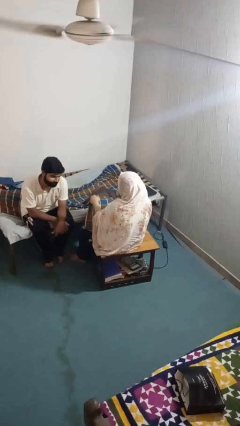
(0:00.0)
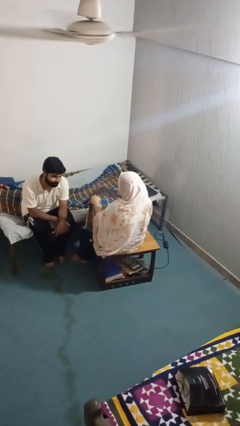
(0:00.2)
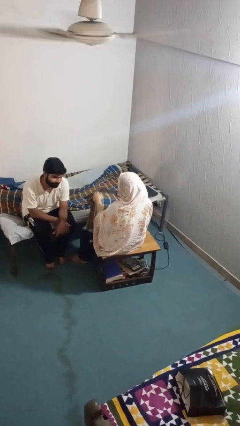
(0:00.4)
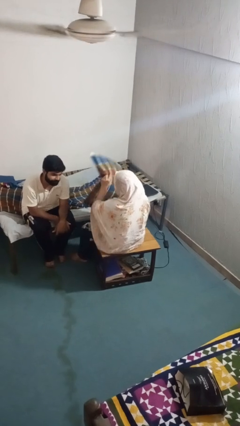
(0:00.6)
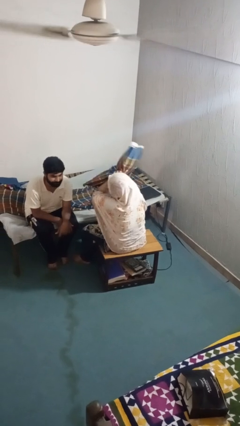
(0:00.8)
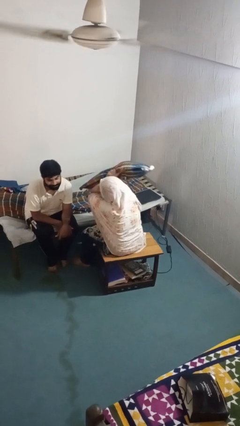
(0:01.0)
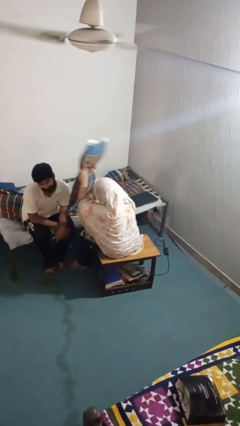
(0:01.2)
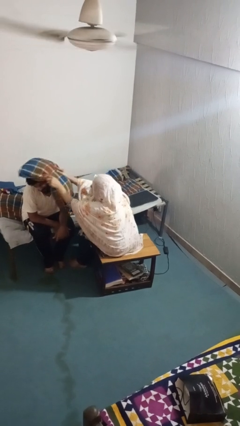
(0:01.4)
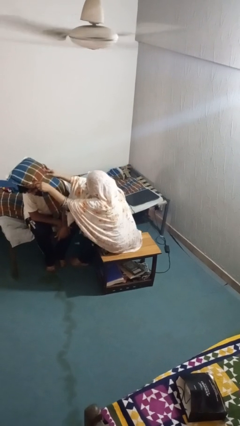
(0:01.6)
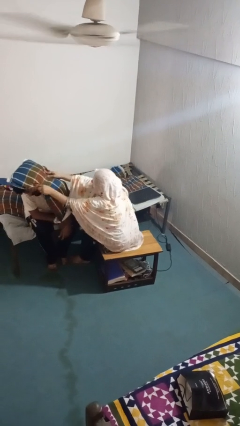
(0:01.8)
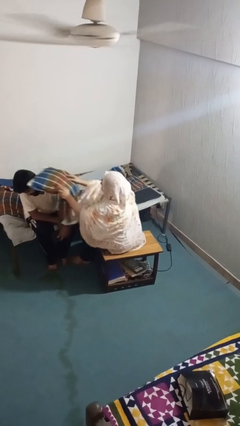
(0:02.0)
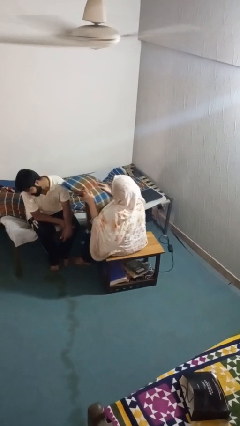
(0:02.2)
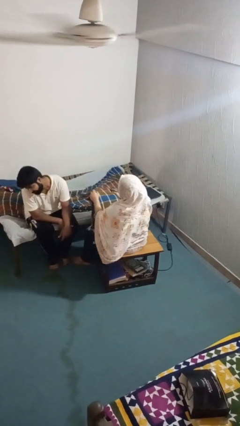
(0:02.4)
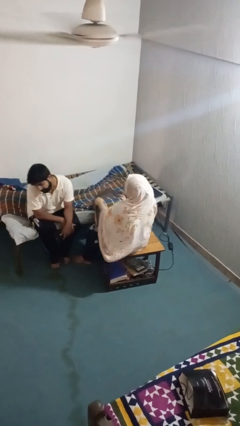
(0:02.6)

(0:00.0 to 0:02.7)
person hits person with pillow

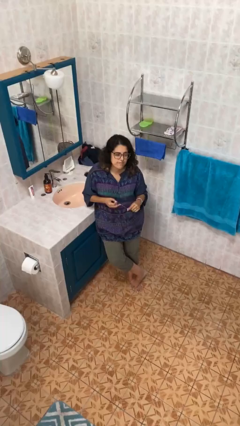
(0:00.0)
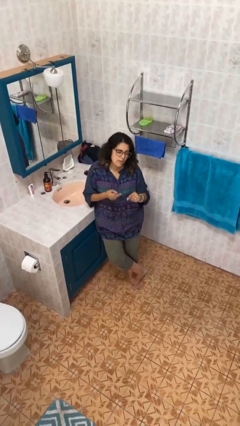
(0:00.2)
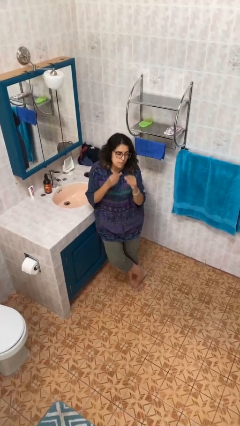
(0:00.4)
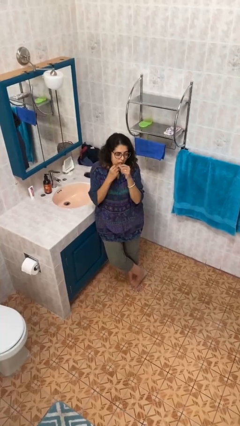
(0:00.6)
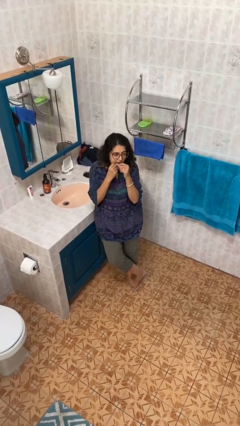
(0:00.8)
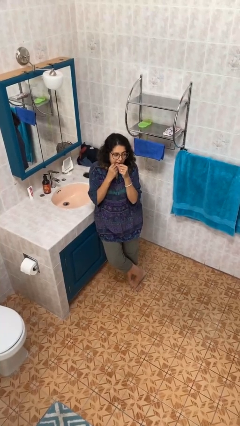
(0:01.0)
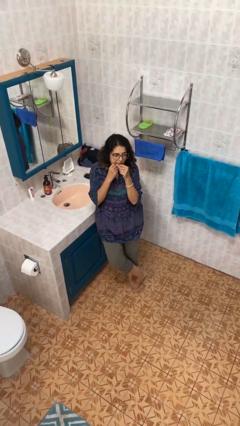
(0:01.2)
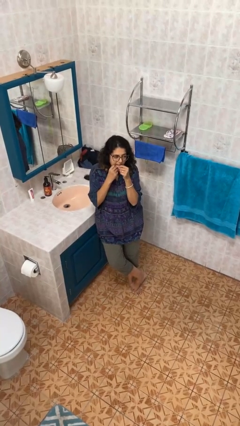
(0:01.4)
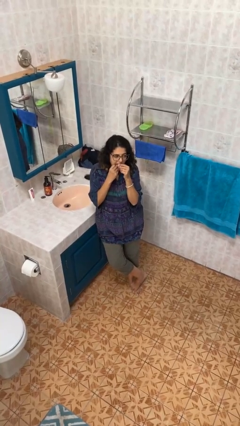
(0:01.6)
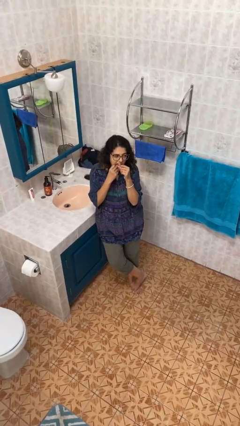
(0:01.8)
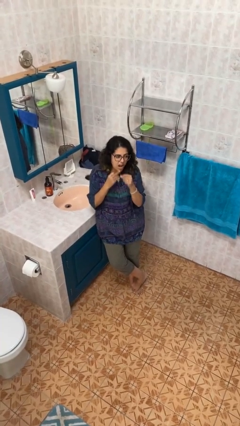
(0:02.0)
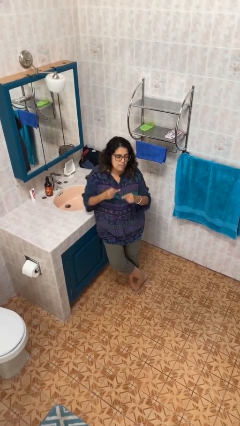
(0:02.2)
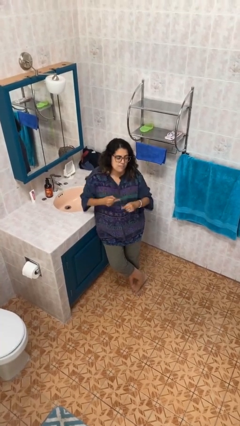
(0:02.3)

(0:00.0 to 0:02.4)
person flosses

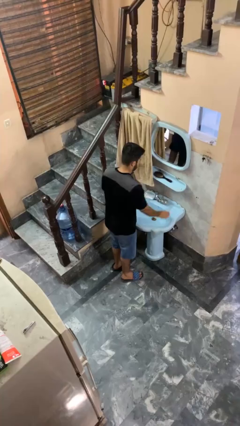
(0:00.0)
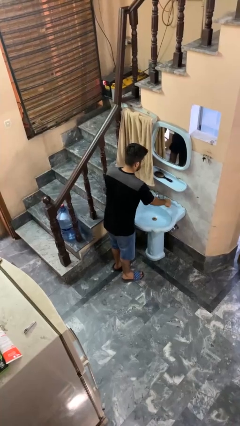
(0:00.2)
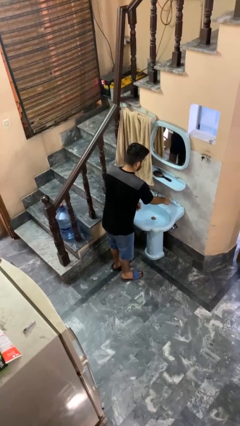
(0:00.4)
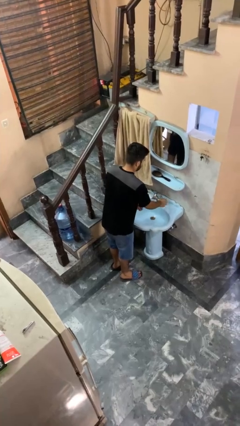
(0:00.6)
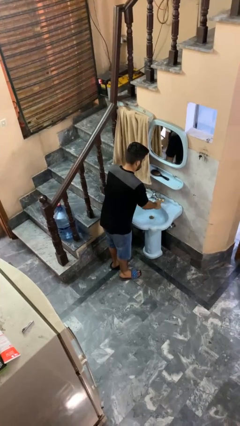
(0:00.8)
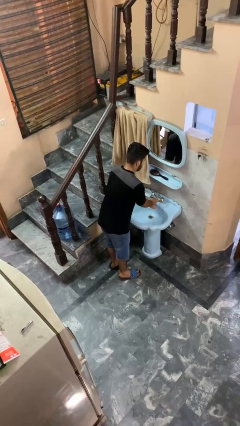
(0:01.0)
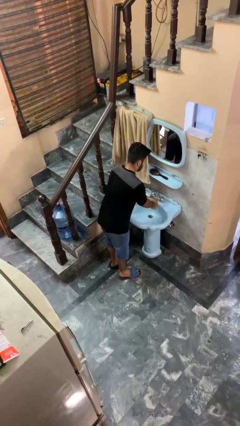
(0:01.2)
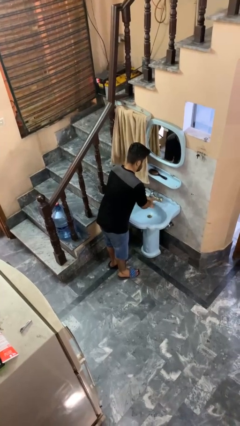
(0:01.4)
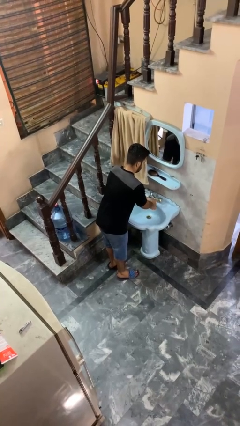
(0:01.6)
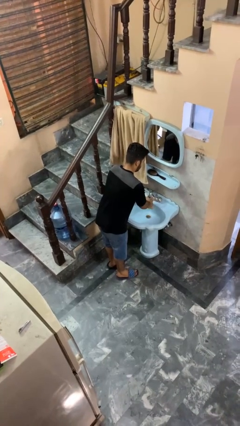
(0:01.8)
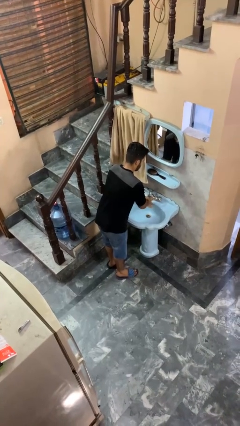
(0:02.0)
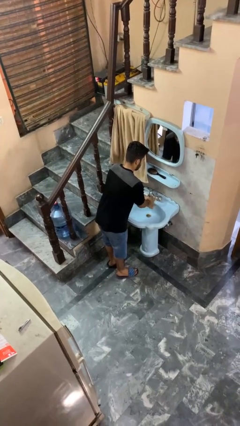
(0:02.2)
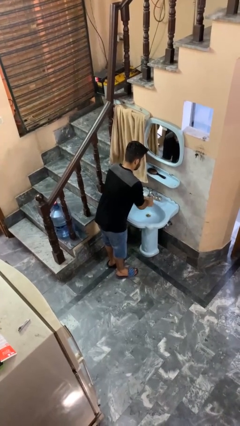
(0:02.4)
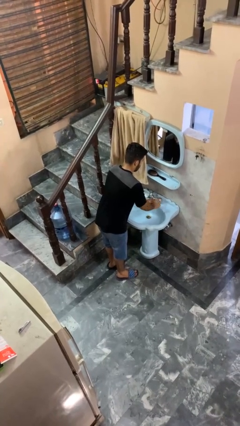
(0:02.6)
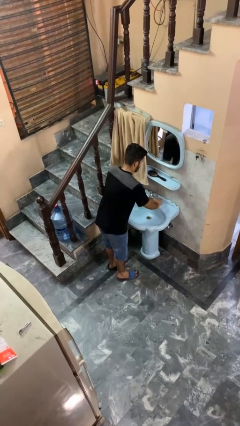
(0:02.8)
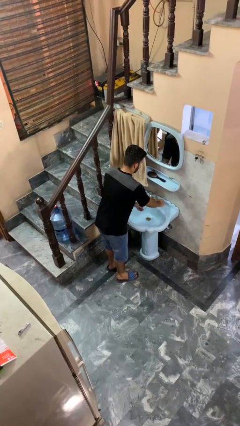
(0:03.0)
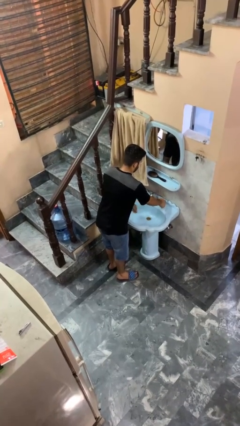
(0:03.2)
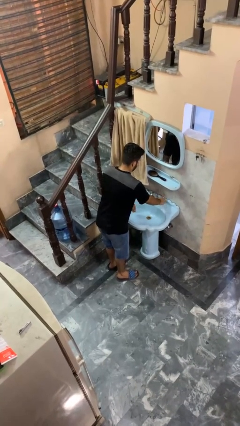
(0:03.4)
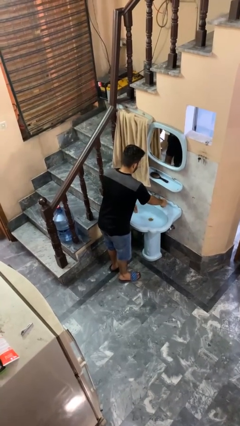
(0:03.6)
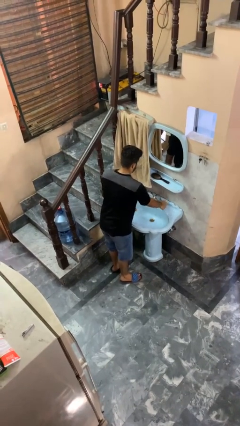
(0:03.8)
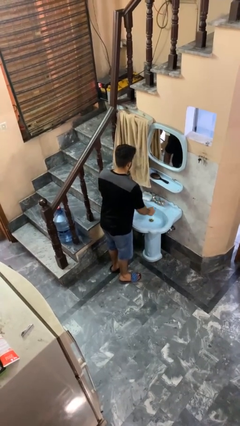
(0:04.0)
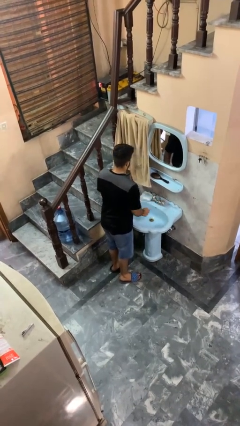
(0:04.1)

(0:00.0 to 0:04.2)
person washes hands

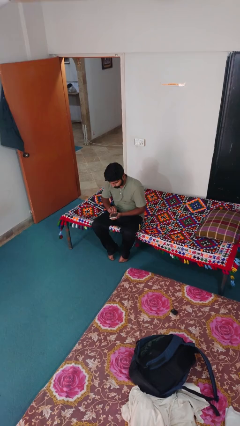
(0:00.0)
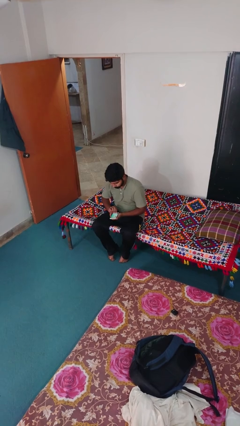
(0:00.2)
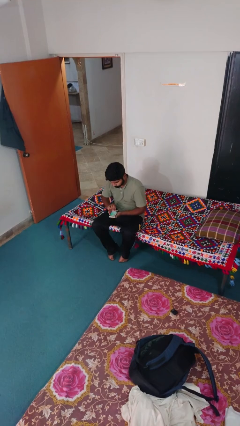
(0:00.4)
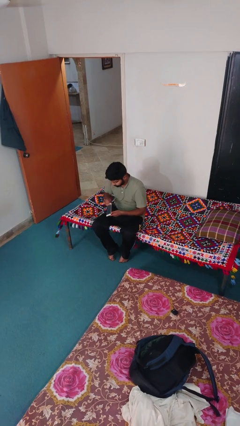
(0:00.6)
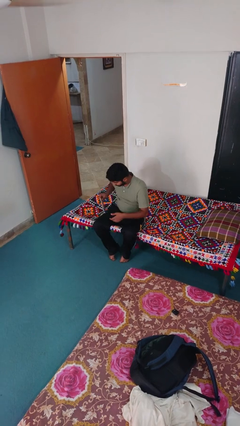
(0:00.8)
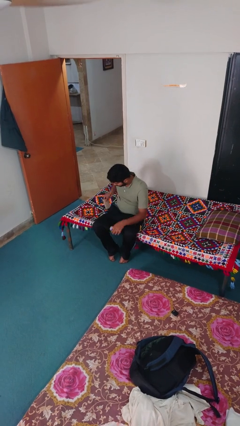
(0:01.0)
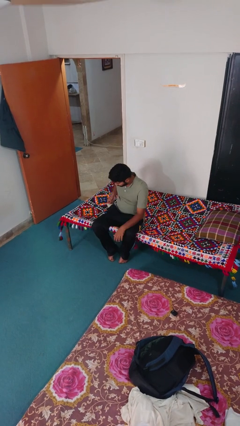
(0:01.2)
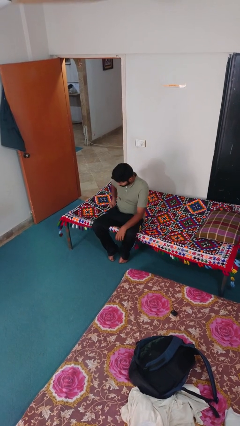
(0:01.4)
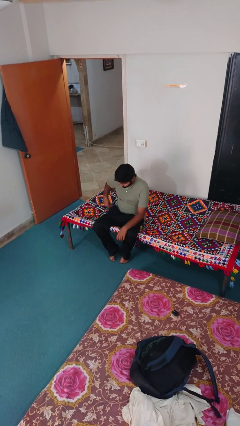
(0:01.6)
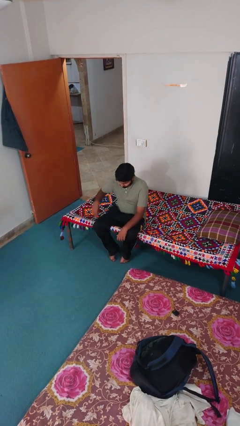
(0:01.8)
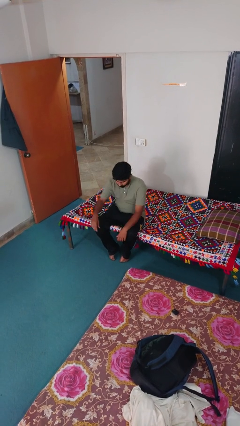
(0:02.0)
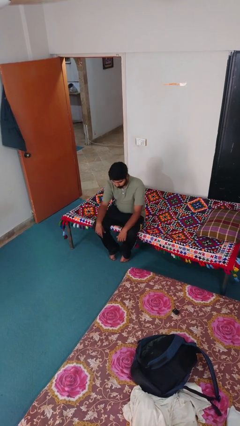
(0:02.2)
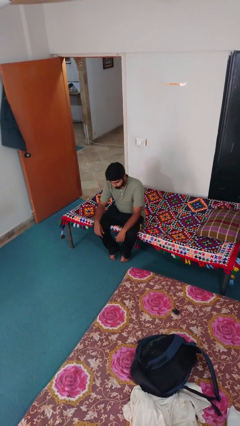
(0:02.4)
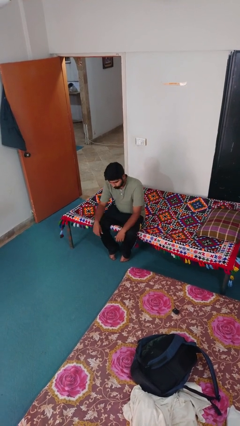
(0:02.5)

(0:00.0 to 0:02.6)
person puts phone into pocket

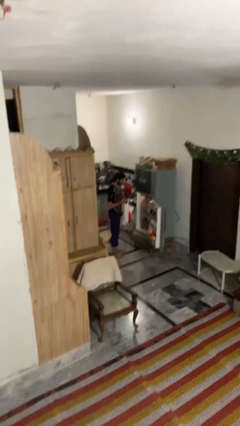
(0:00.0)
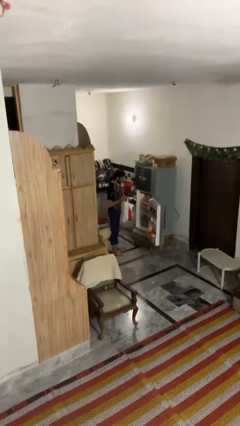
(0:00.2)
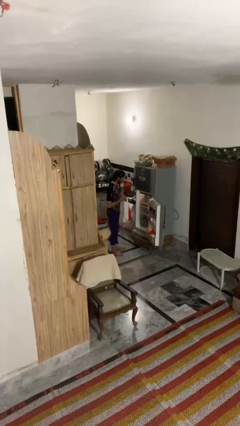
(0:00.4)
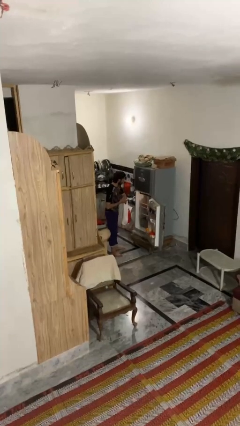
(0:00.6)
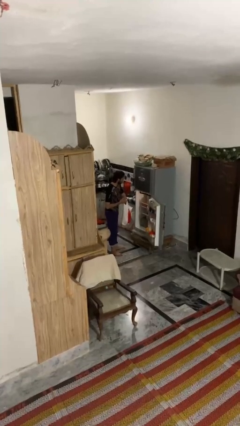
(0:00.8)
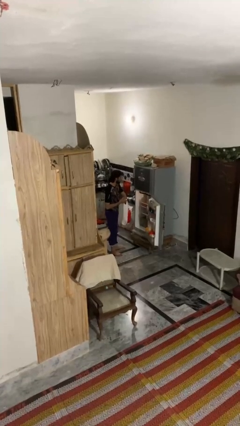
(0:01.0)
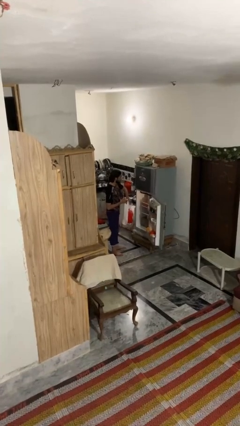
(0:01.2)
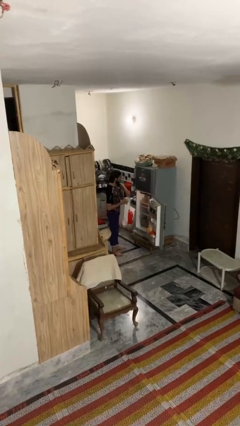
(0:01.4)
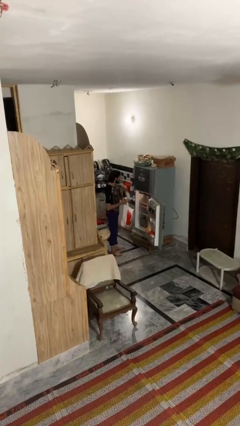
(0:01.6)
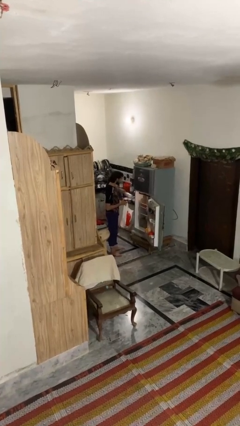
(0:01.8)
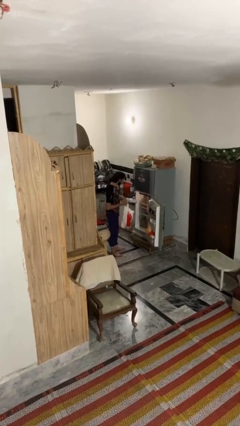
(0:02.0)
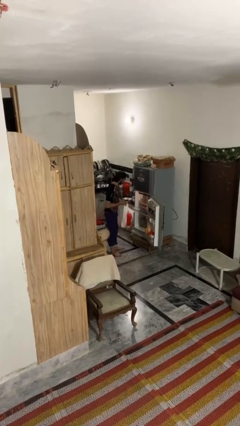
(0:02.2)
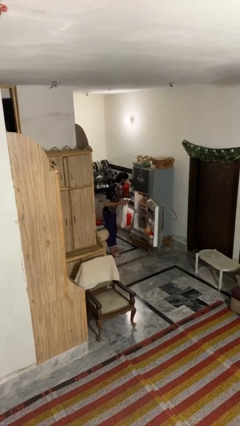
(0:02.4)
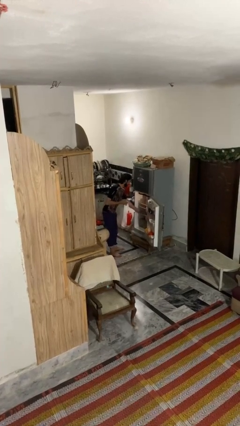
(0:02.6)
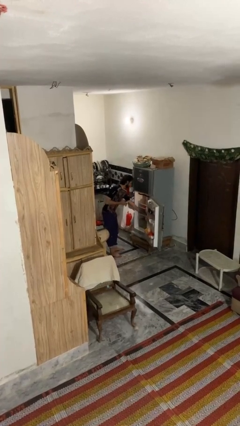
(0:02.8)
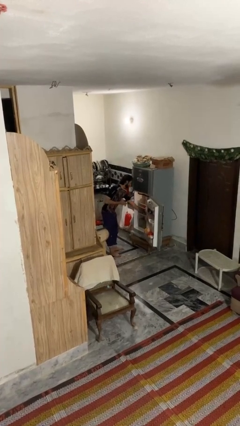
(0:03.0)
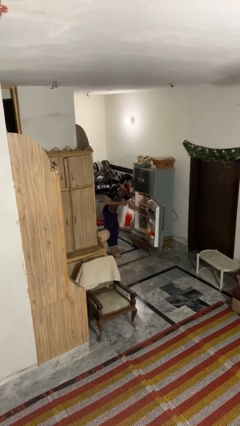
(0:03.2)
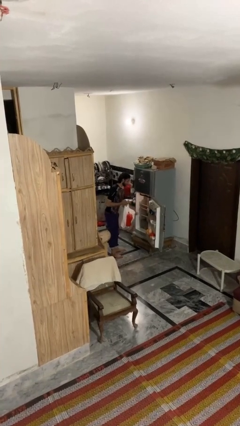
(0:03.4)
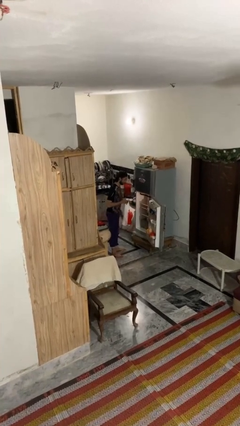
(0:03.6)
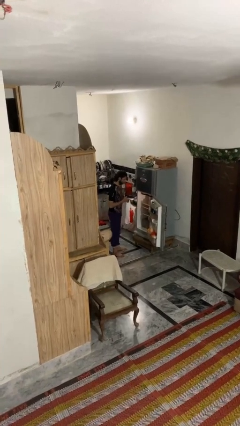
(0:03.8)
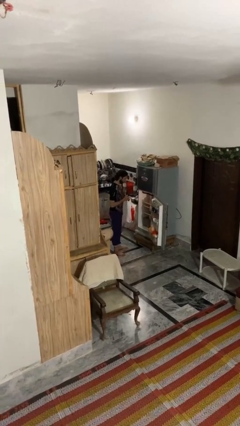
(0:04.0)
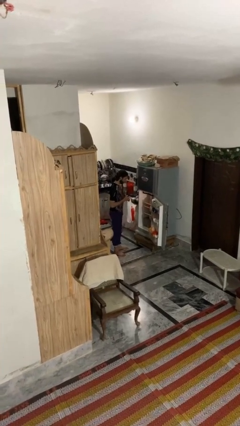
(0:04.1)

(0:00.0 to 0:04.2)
person loads groceries into refrigerator

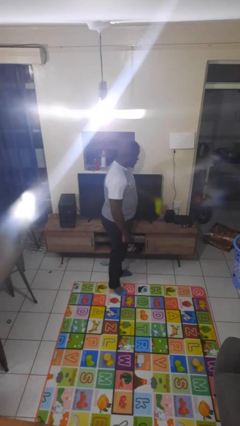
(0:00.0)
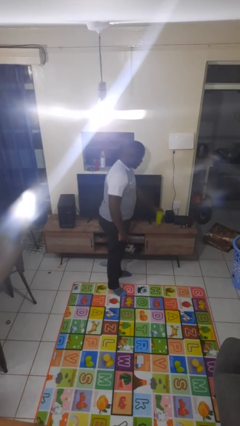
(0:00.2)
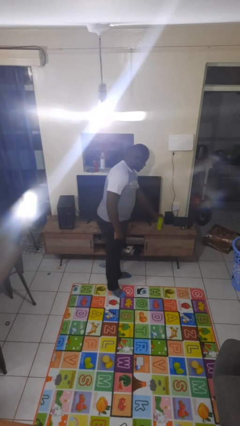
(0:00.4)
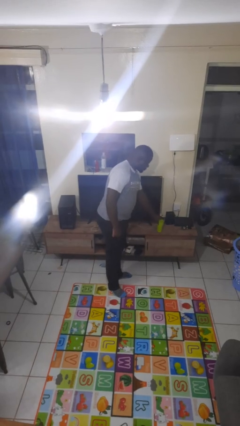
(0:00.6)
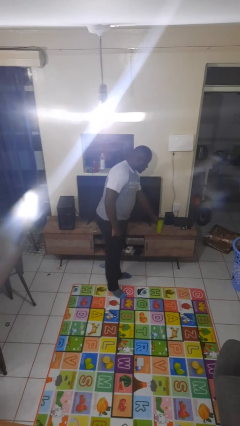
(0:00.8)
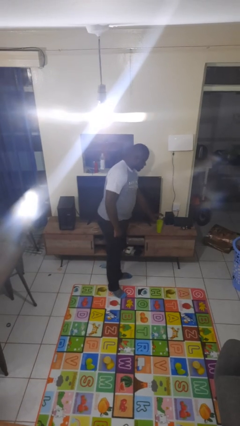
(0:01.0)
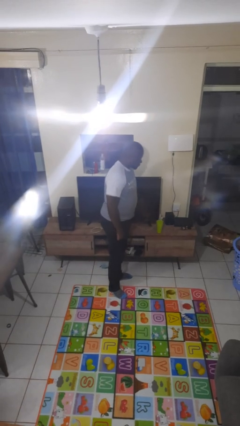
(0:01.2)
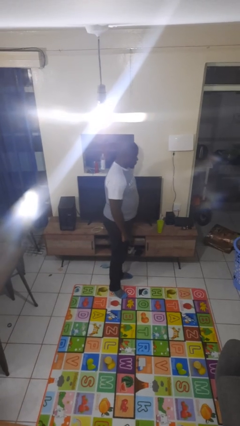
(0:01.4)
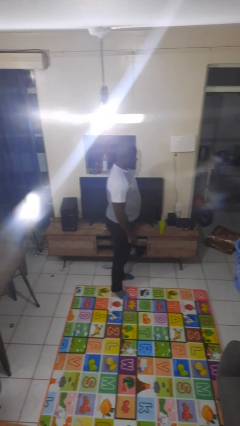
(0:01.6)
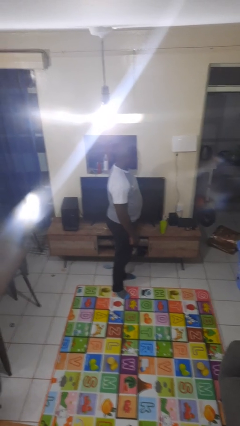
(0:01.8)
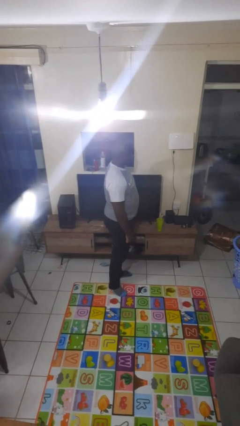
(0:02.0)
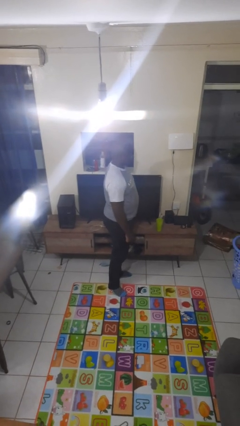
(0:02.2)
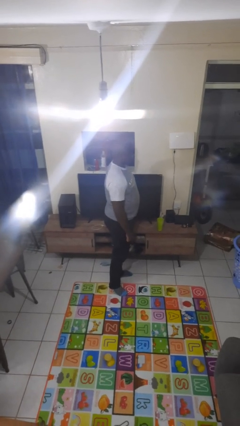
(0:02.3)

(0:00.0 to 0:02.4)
person puts down object on countertop
